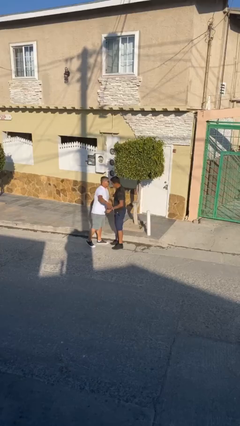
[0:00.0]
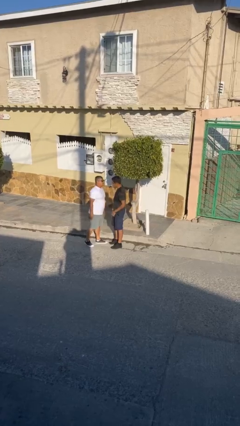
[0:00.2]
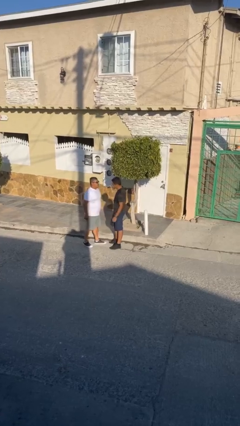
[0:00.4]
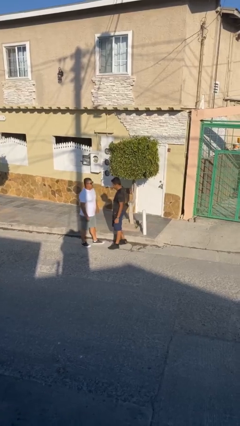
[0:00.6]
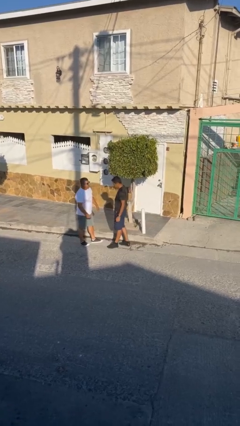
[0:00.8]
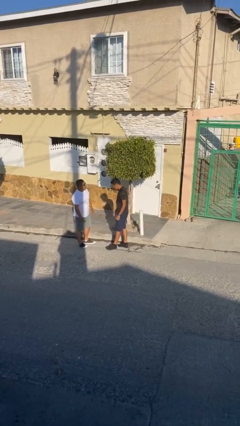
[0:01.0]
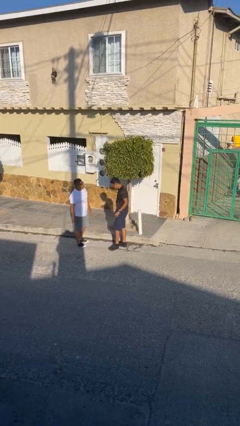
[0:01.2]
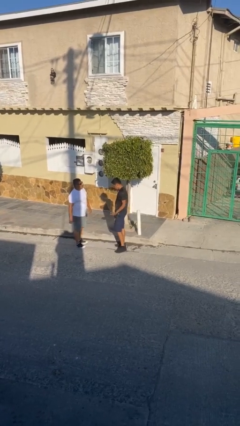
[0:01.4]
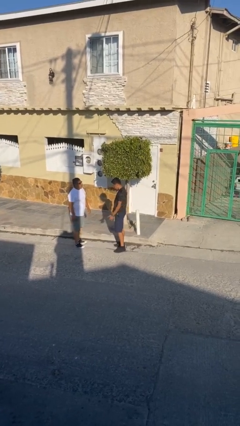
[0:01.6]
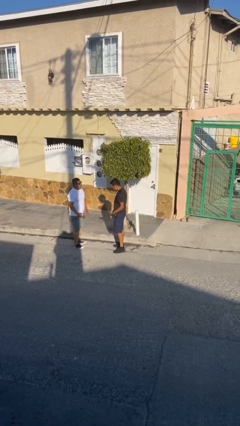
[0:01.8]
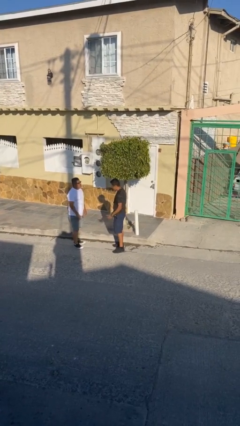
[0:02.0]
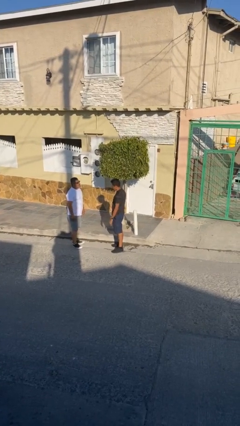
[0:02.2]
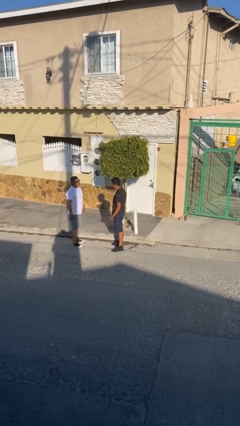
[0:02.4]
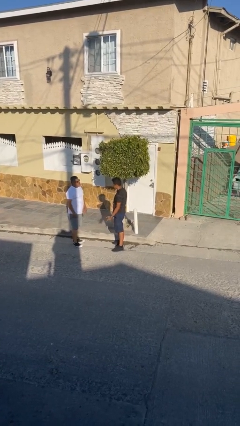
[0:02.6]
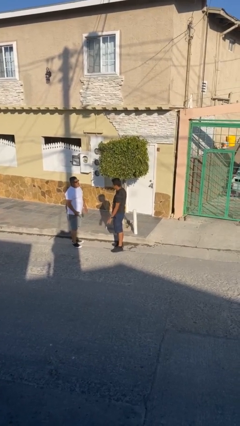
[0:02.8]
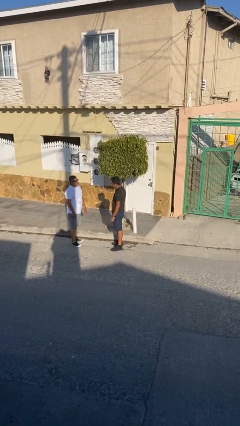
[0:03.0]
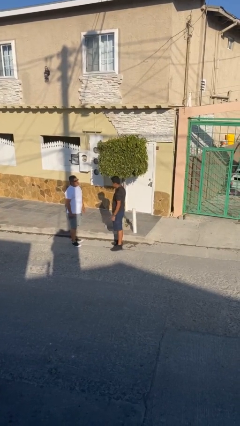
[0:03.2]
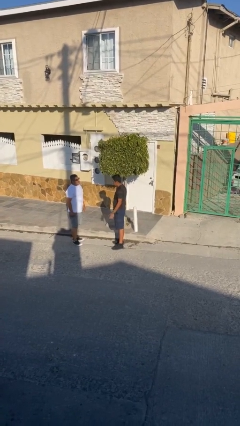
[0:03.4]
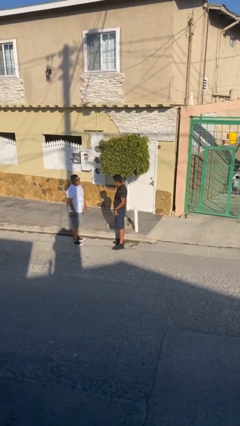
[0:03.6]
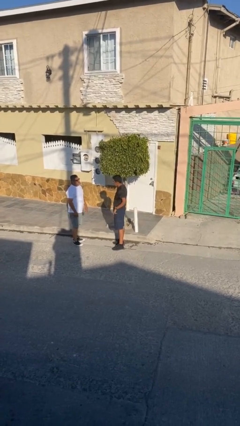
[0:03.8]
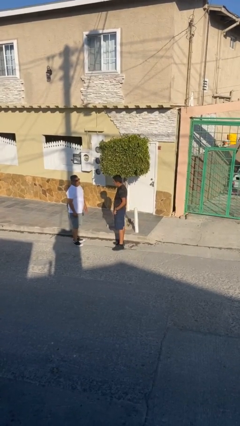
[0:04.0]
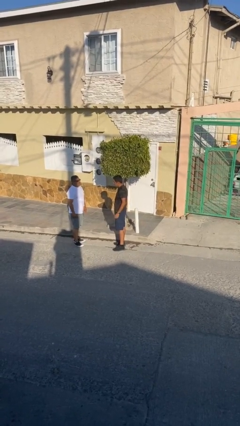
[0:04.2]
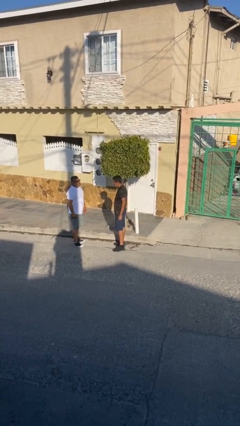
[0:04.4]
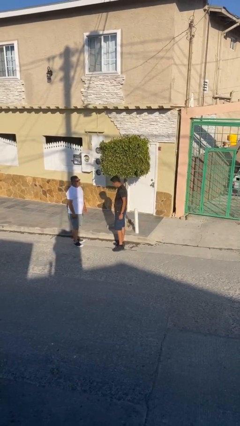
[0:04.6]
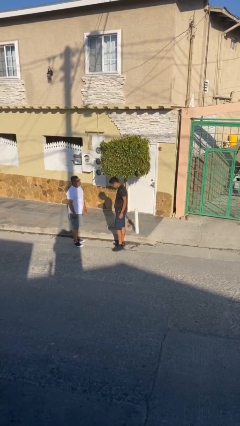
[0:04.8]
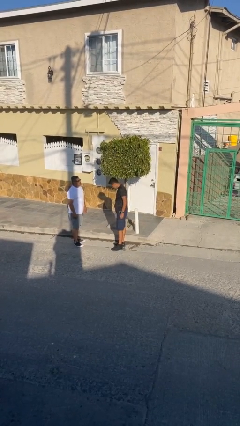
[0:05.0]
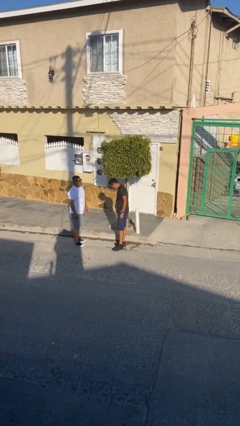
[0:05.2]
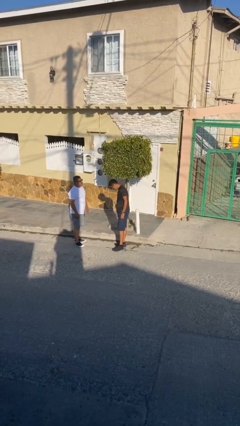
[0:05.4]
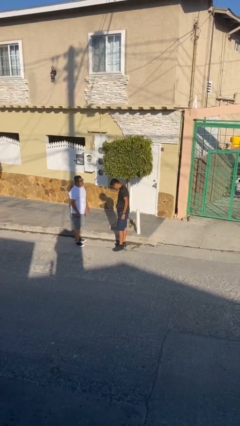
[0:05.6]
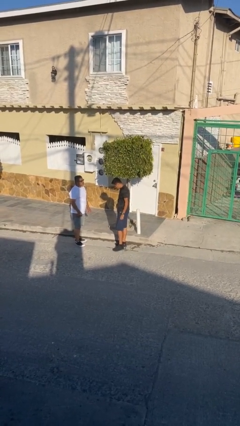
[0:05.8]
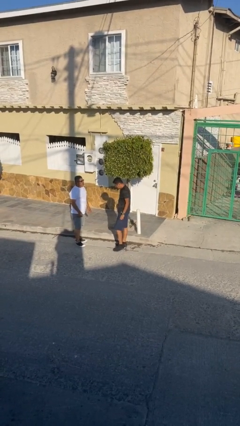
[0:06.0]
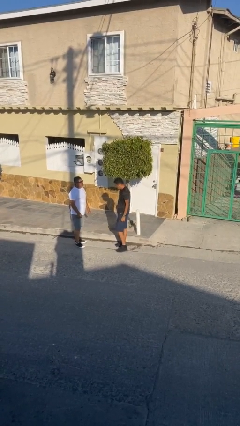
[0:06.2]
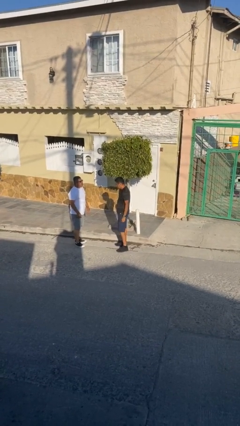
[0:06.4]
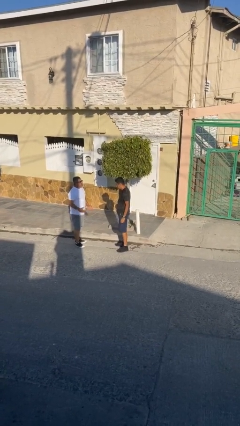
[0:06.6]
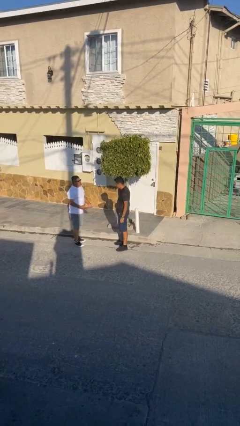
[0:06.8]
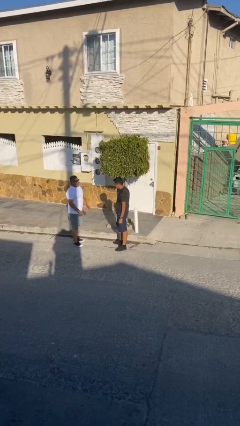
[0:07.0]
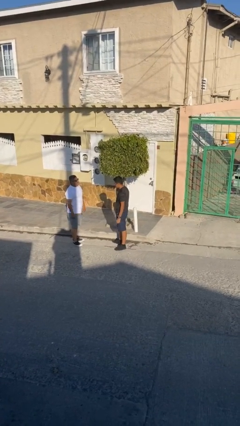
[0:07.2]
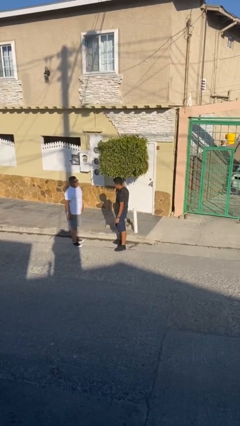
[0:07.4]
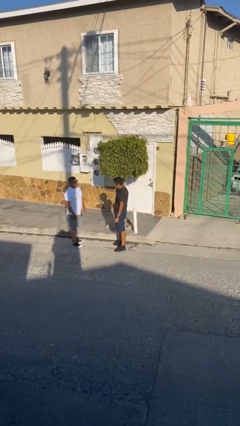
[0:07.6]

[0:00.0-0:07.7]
person talks to person

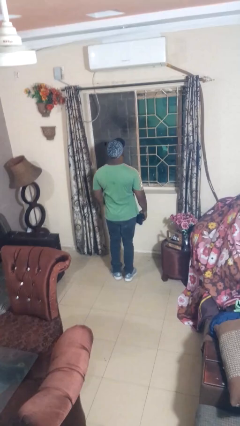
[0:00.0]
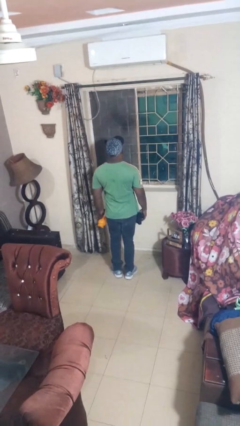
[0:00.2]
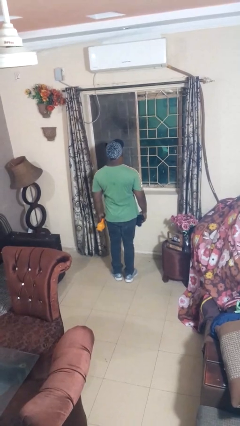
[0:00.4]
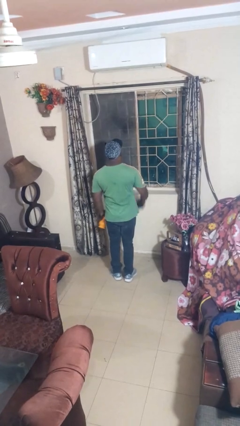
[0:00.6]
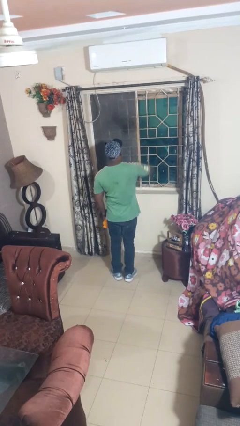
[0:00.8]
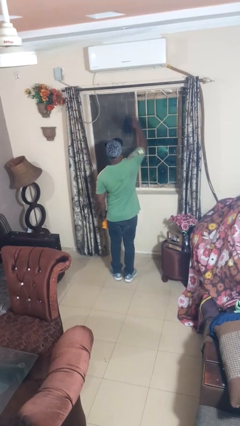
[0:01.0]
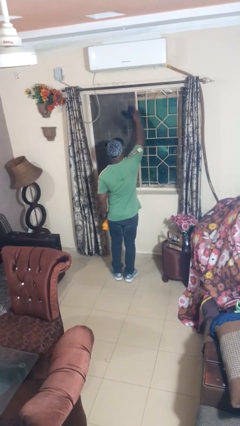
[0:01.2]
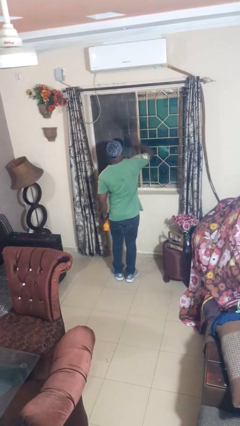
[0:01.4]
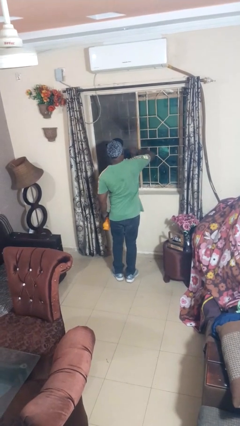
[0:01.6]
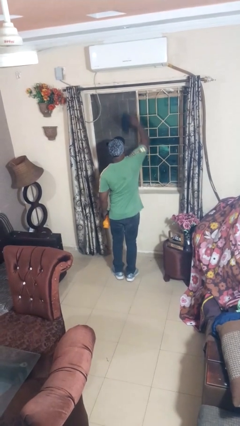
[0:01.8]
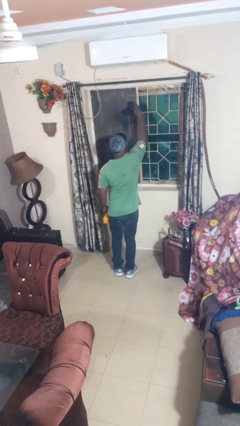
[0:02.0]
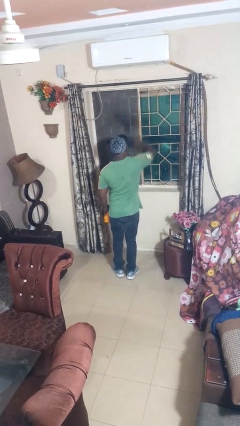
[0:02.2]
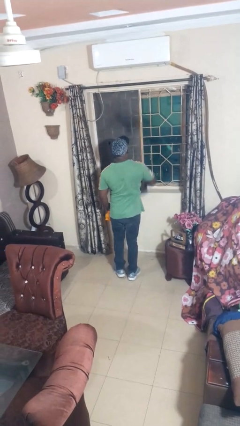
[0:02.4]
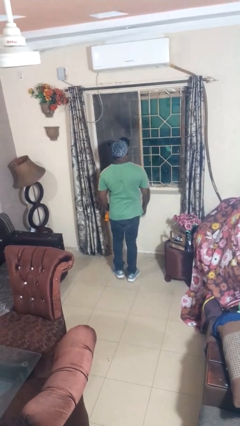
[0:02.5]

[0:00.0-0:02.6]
person washes window

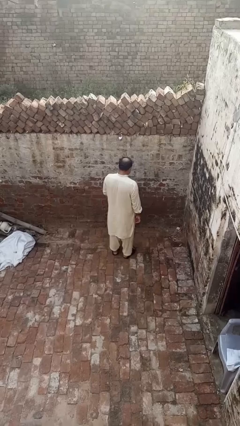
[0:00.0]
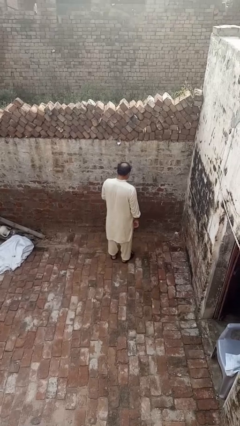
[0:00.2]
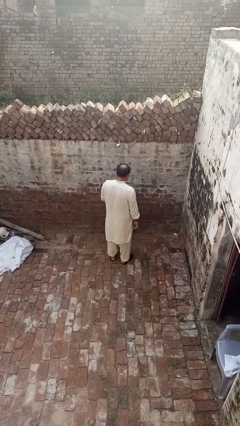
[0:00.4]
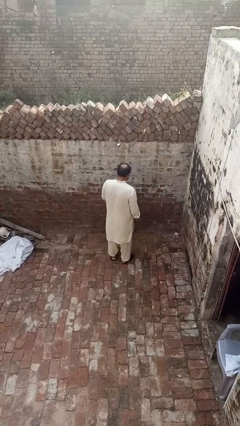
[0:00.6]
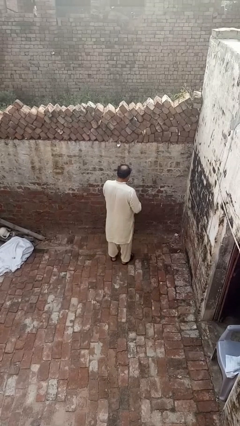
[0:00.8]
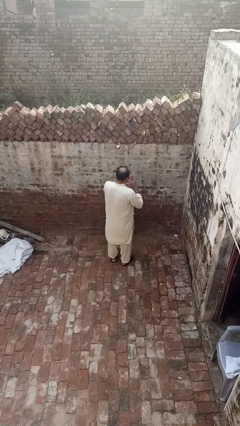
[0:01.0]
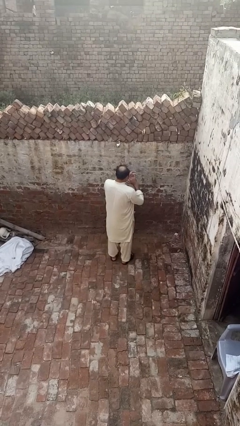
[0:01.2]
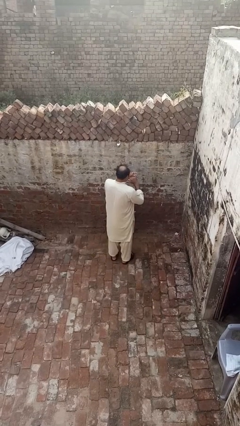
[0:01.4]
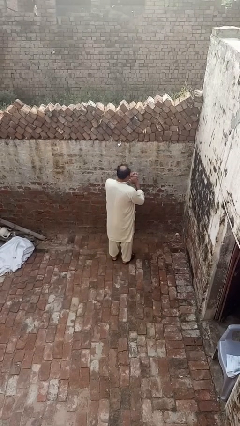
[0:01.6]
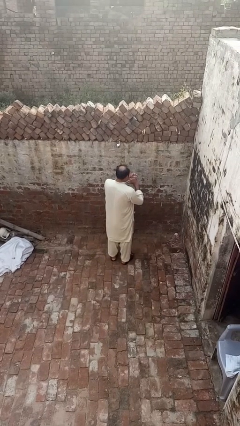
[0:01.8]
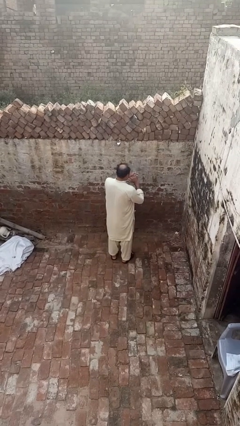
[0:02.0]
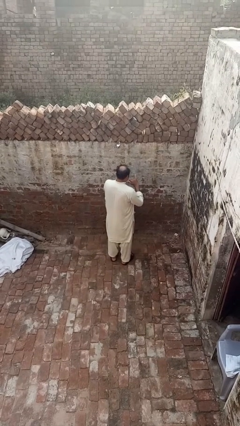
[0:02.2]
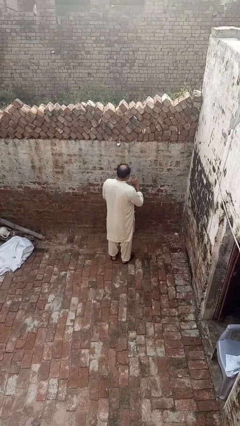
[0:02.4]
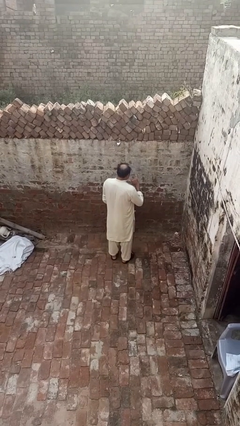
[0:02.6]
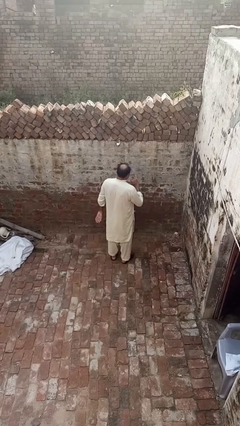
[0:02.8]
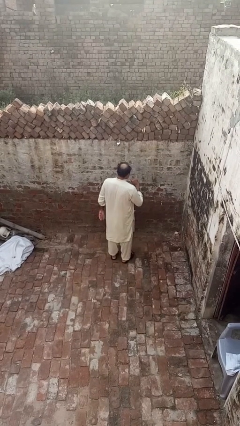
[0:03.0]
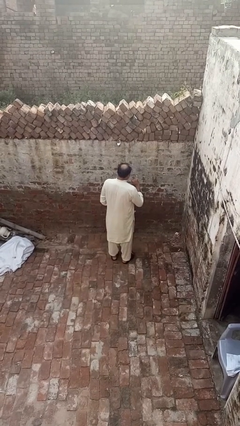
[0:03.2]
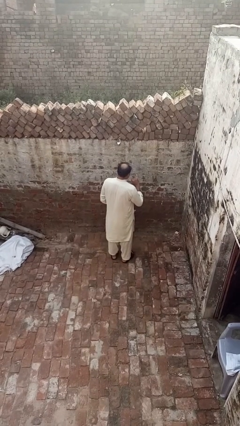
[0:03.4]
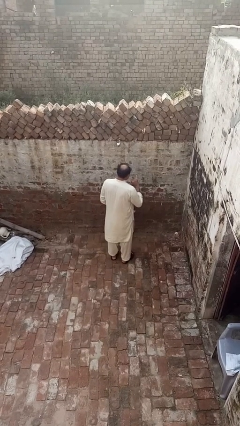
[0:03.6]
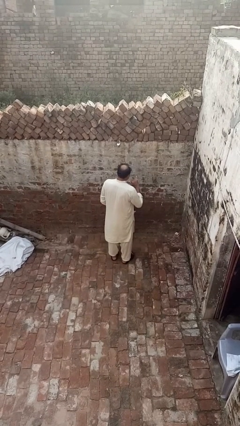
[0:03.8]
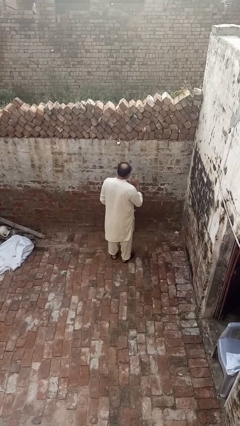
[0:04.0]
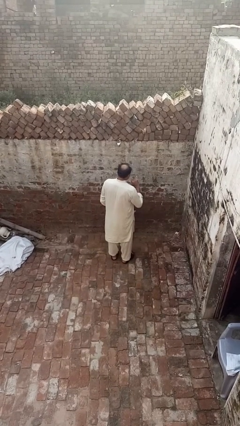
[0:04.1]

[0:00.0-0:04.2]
person puts on ring

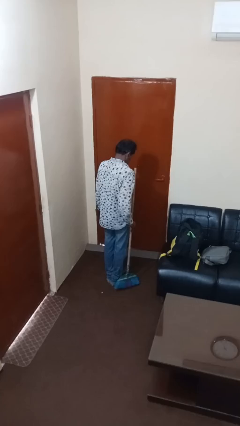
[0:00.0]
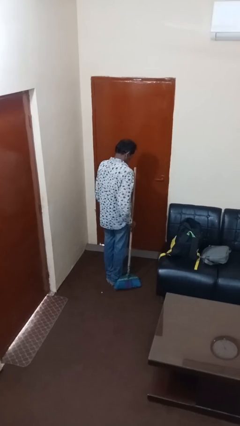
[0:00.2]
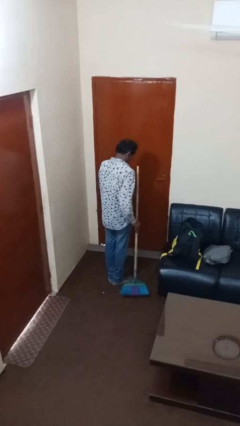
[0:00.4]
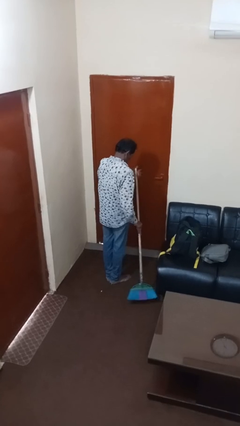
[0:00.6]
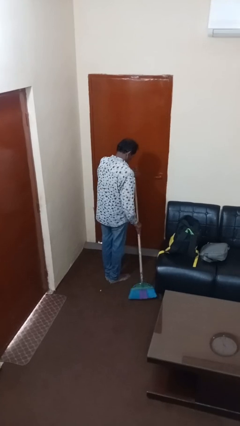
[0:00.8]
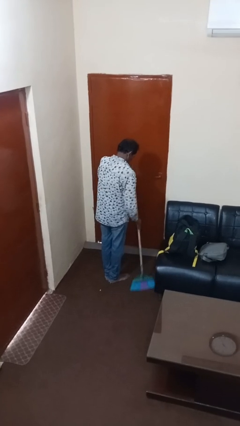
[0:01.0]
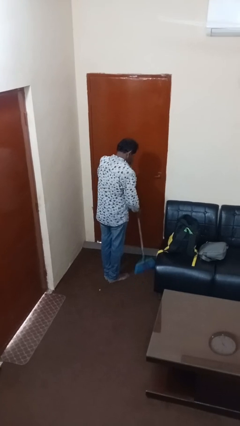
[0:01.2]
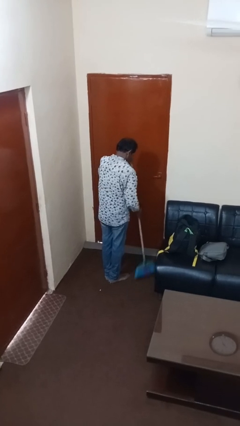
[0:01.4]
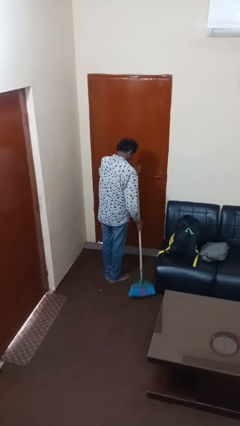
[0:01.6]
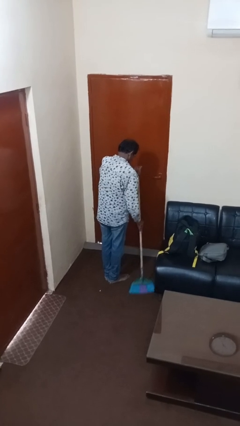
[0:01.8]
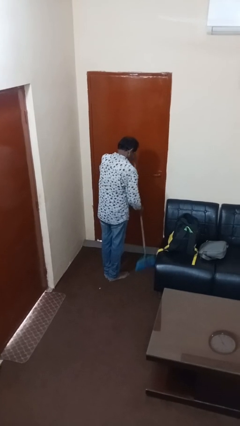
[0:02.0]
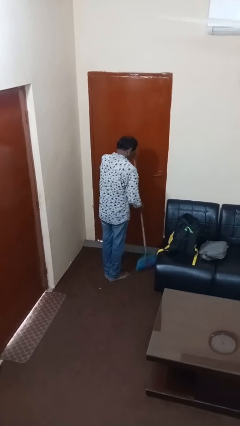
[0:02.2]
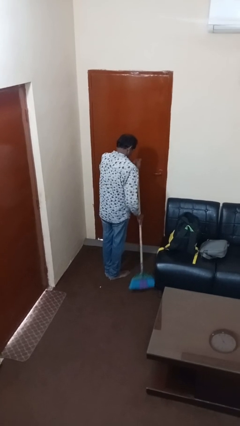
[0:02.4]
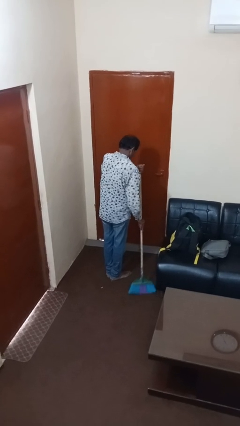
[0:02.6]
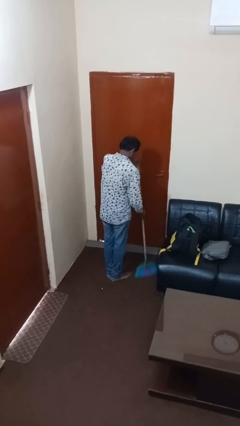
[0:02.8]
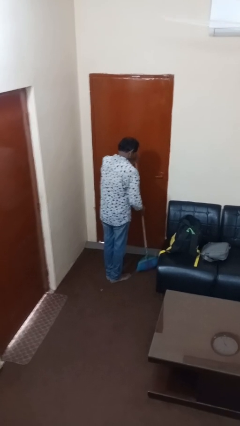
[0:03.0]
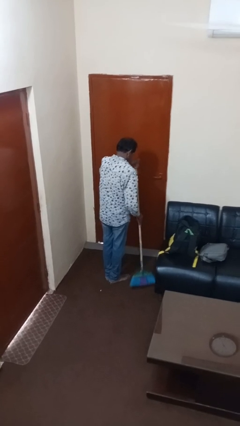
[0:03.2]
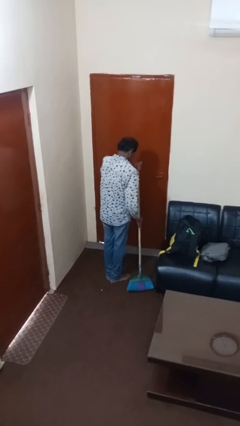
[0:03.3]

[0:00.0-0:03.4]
person sweeps floor
